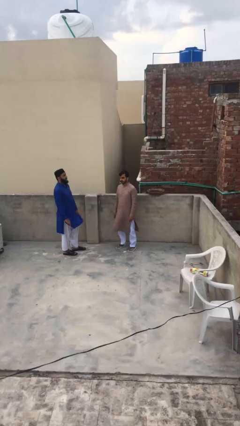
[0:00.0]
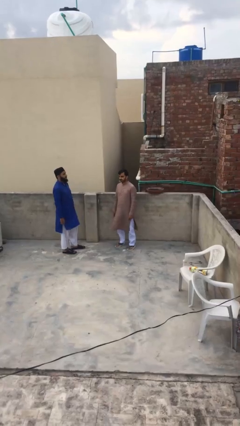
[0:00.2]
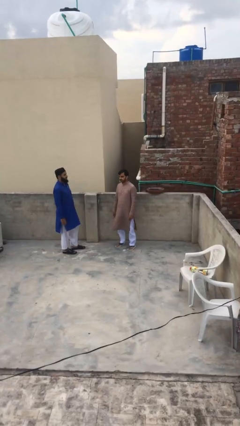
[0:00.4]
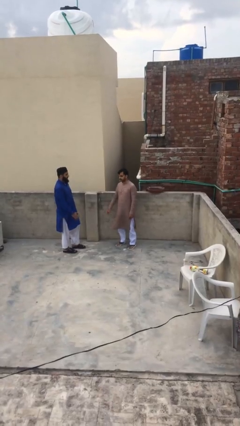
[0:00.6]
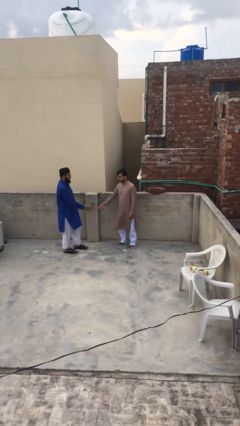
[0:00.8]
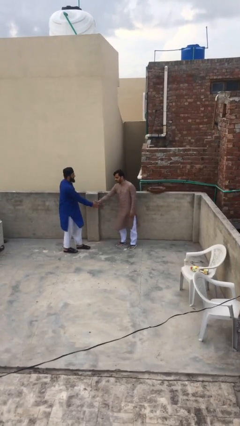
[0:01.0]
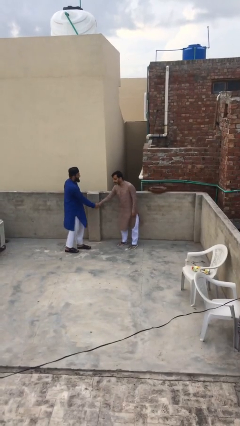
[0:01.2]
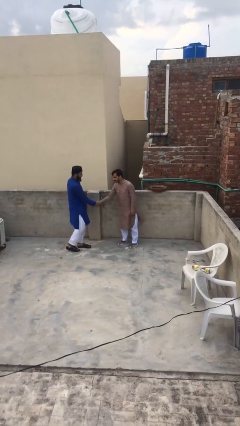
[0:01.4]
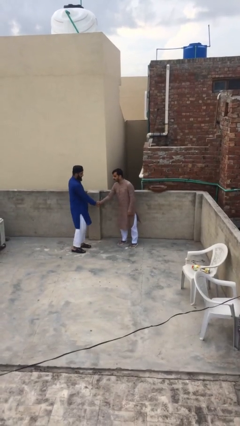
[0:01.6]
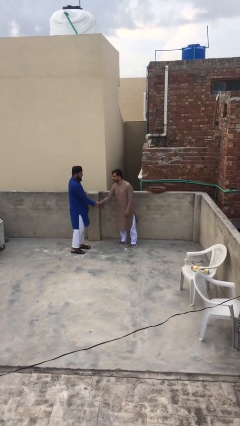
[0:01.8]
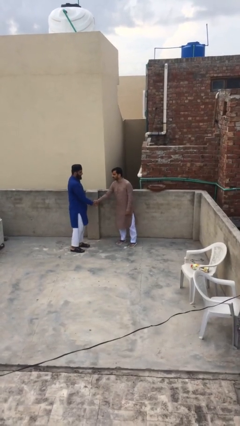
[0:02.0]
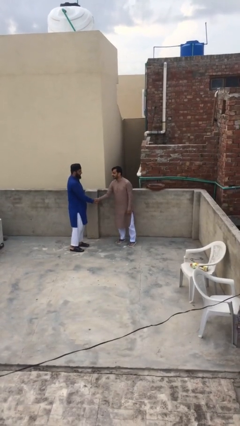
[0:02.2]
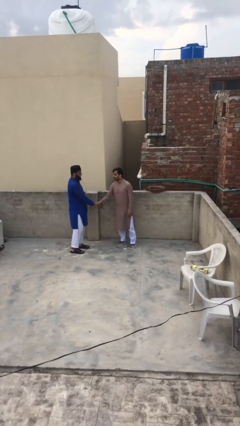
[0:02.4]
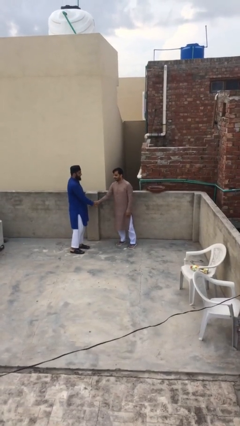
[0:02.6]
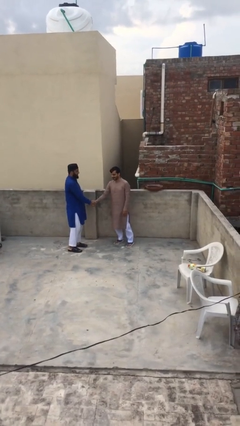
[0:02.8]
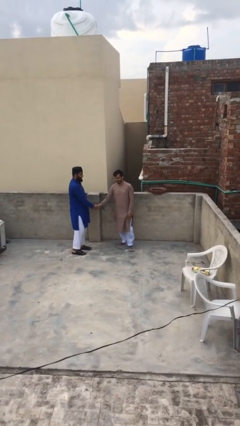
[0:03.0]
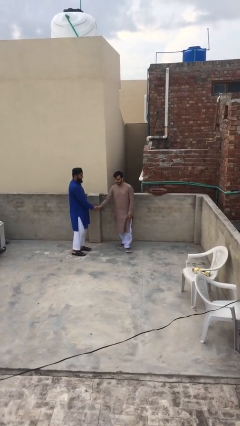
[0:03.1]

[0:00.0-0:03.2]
person shakes hand

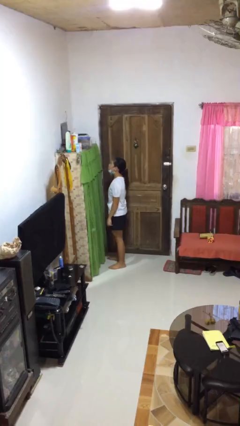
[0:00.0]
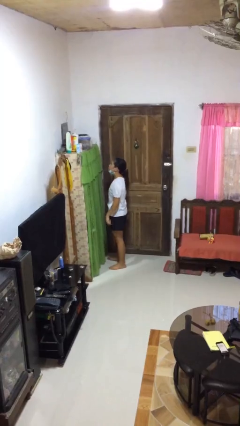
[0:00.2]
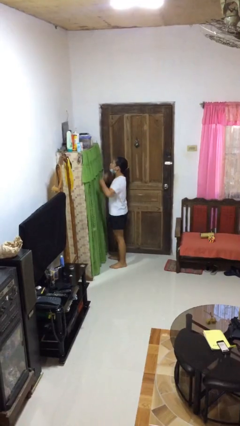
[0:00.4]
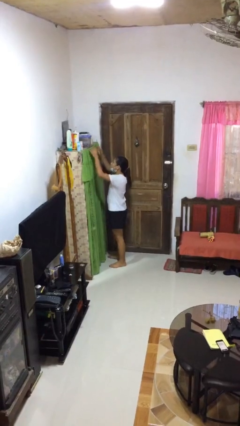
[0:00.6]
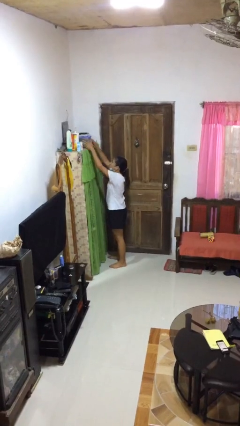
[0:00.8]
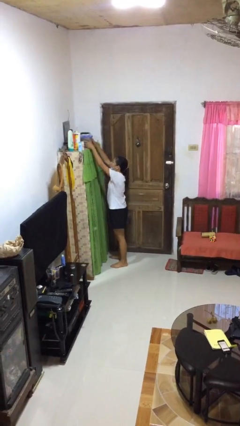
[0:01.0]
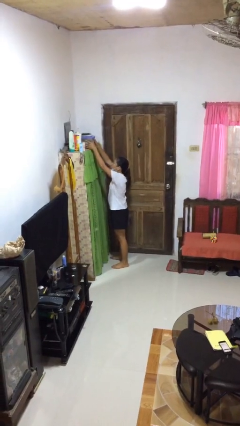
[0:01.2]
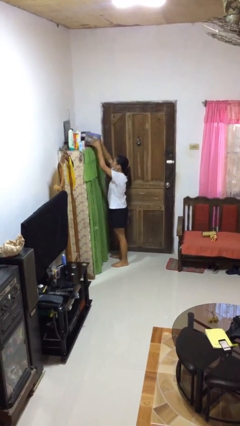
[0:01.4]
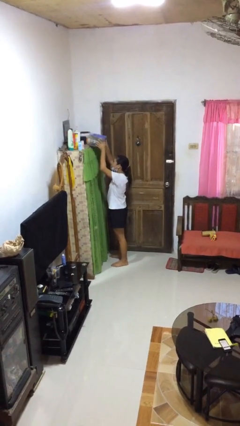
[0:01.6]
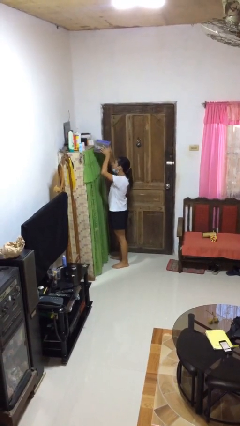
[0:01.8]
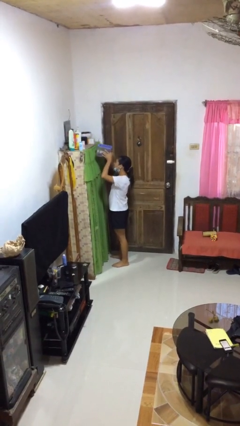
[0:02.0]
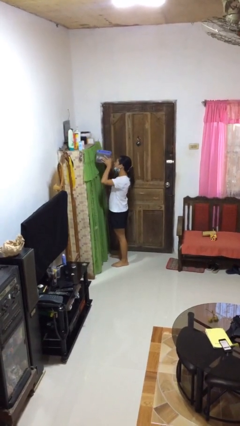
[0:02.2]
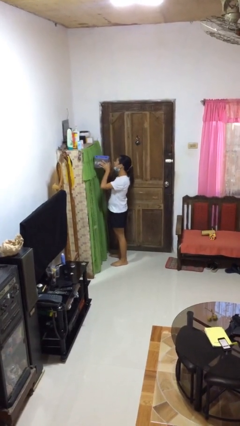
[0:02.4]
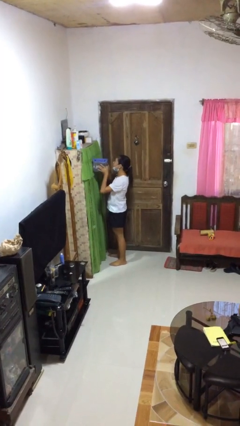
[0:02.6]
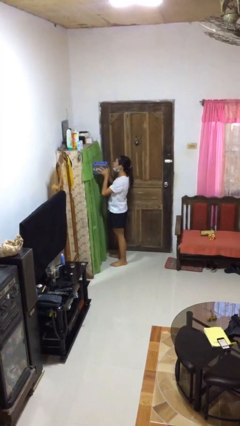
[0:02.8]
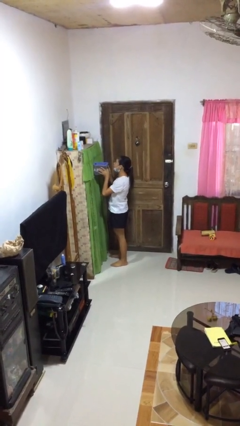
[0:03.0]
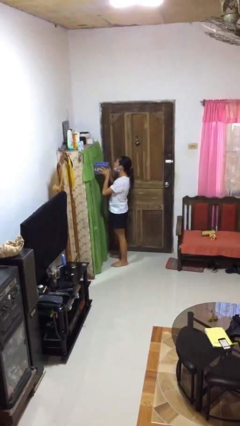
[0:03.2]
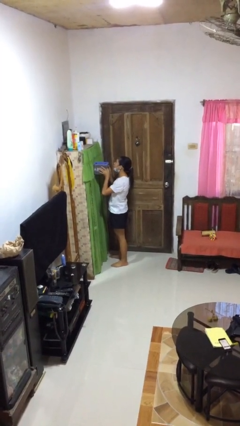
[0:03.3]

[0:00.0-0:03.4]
person picks up object from shelf

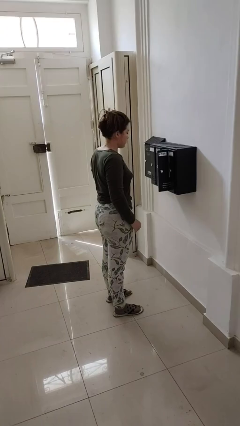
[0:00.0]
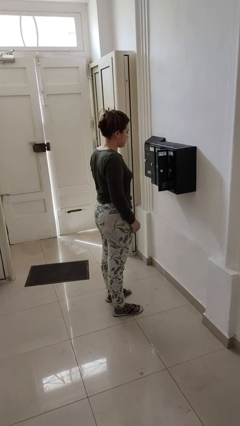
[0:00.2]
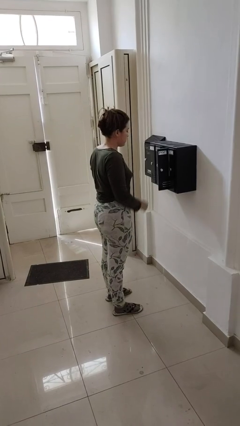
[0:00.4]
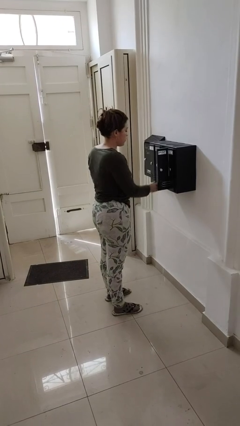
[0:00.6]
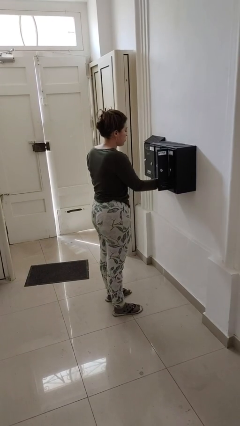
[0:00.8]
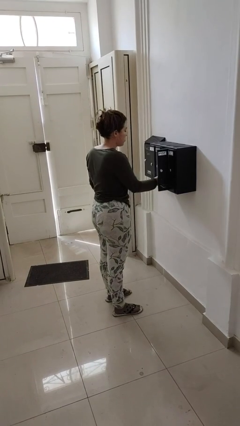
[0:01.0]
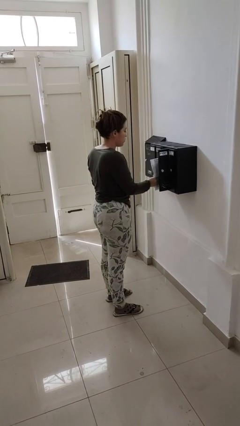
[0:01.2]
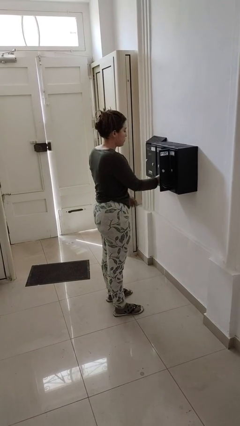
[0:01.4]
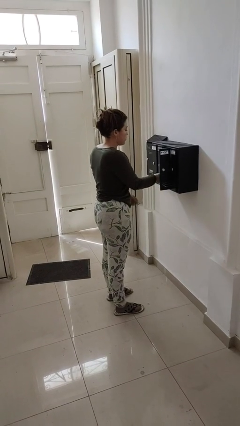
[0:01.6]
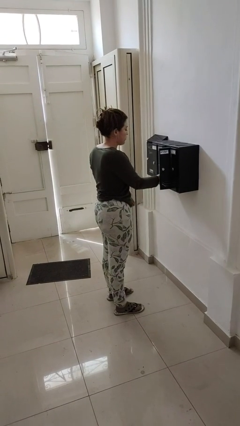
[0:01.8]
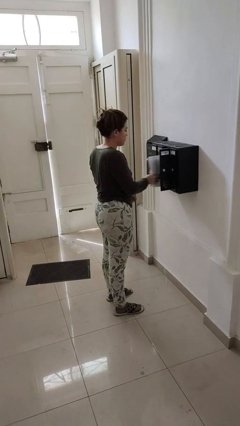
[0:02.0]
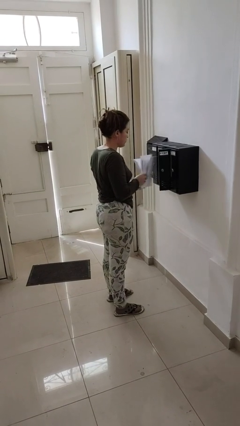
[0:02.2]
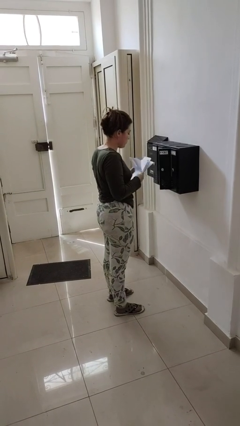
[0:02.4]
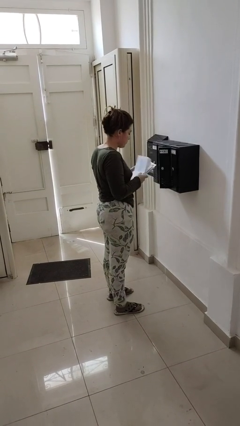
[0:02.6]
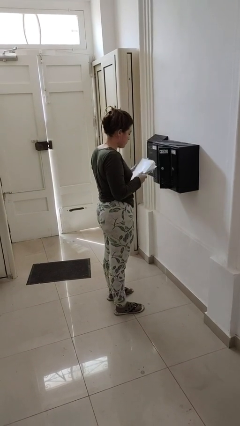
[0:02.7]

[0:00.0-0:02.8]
person takes letters from mailbox

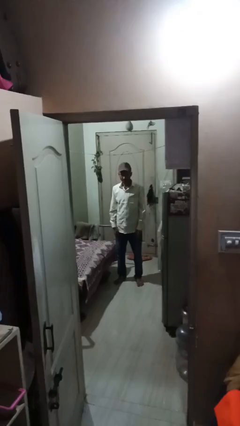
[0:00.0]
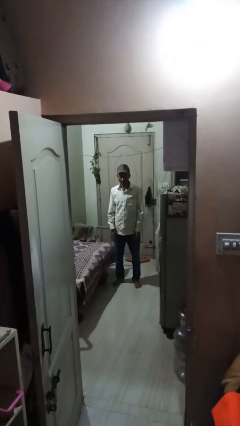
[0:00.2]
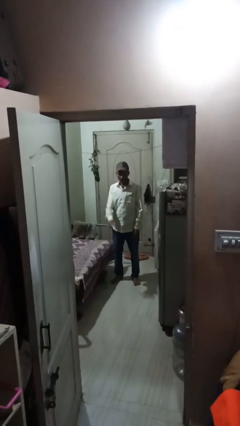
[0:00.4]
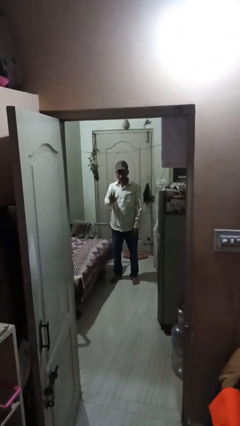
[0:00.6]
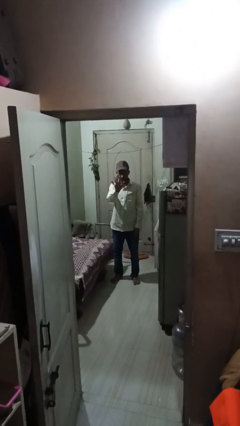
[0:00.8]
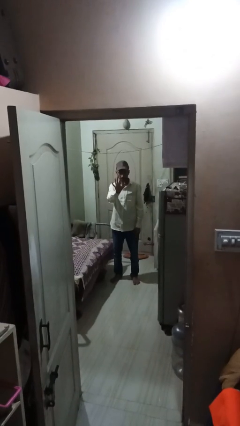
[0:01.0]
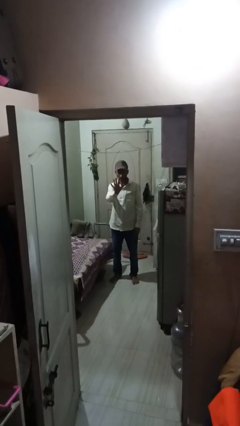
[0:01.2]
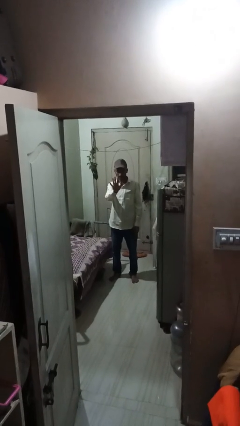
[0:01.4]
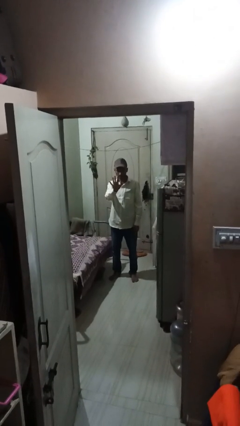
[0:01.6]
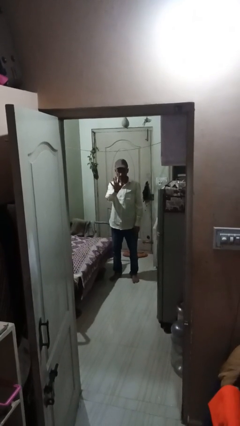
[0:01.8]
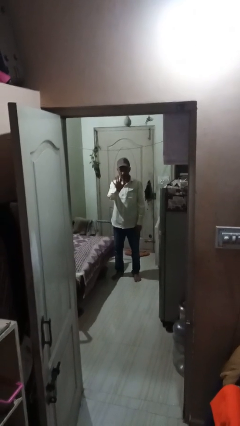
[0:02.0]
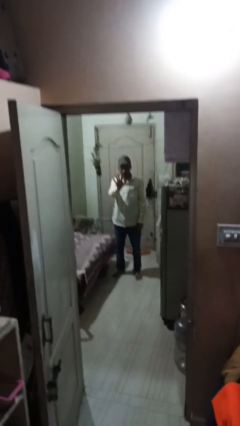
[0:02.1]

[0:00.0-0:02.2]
person gestures number five

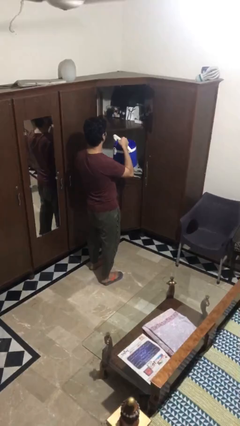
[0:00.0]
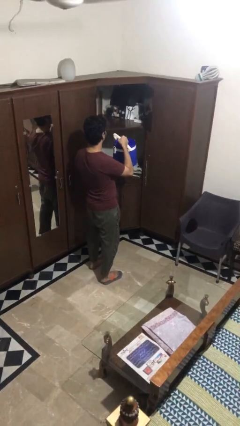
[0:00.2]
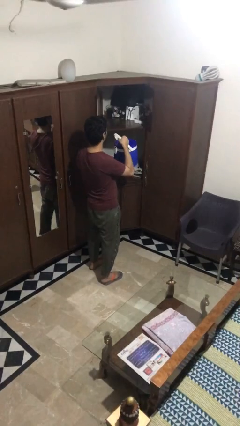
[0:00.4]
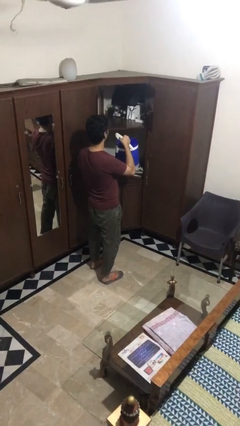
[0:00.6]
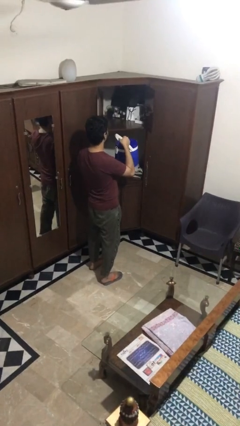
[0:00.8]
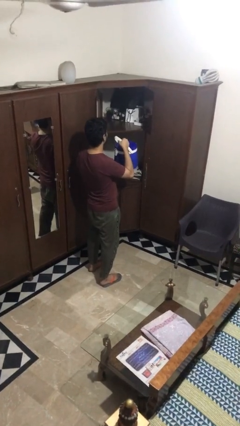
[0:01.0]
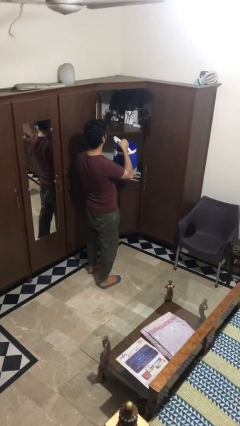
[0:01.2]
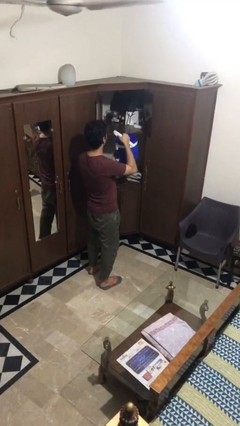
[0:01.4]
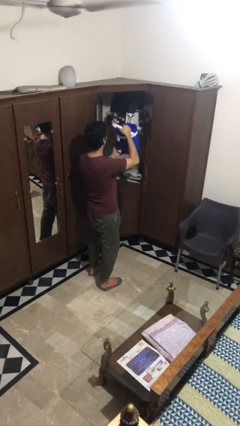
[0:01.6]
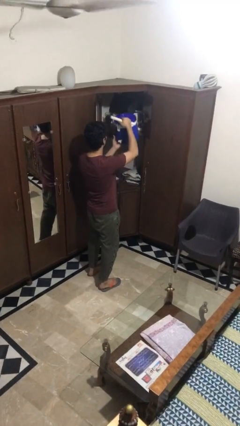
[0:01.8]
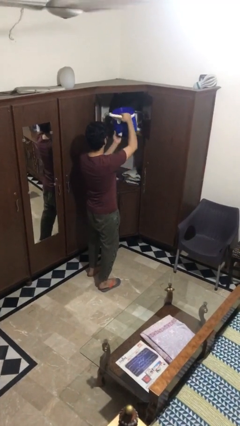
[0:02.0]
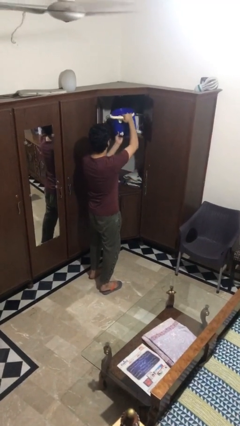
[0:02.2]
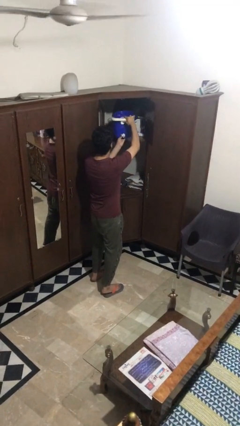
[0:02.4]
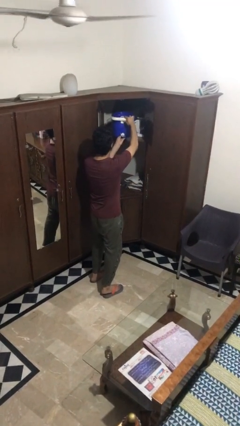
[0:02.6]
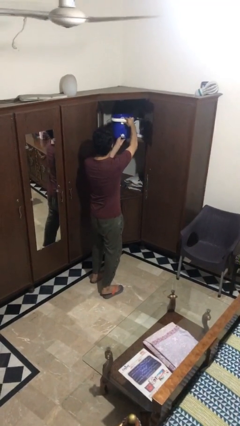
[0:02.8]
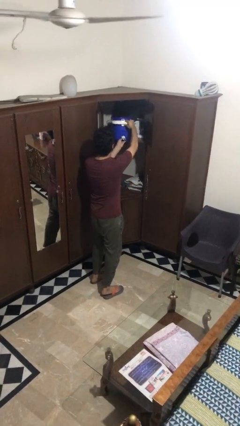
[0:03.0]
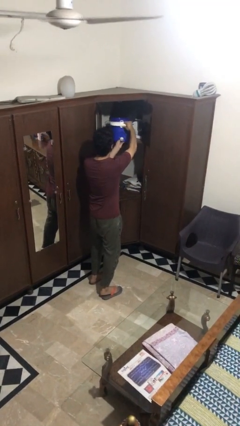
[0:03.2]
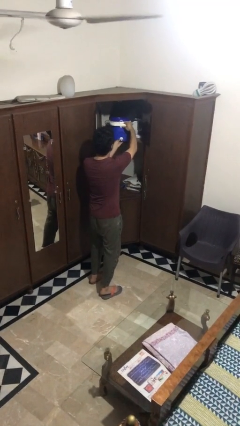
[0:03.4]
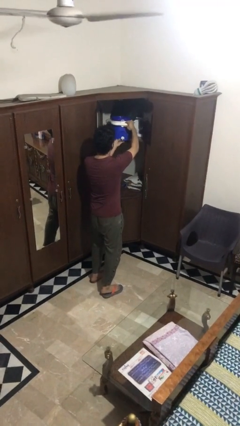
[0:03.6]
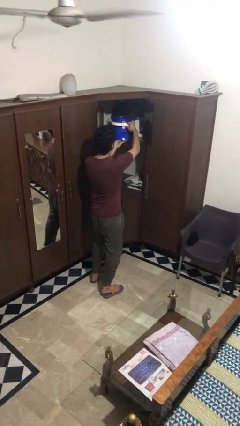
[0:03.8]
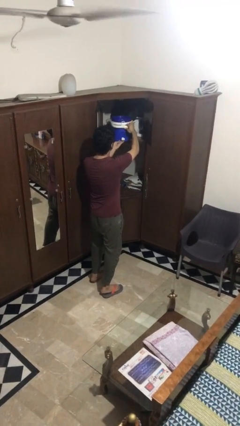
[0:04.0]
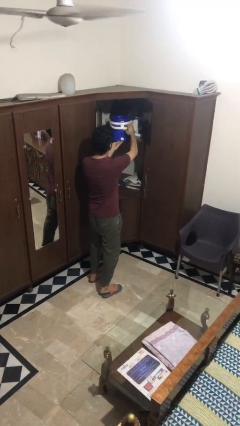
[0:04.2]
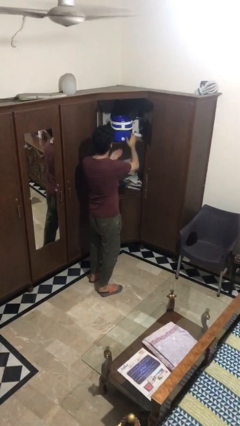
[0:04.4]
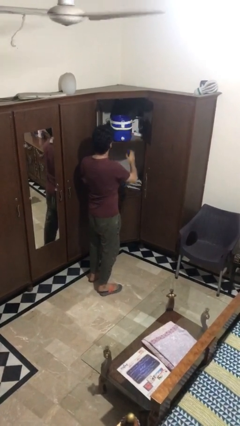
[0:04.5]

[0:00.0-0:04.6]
person puts down object on shelf

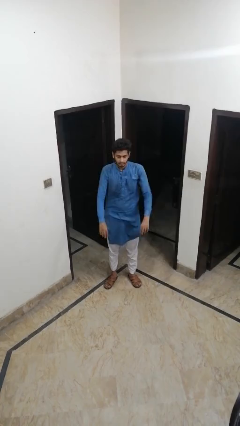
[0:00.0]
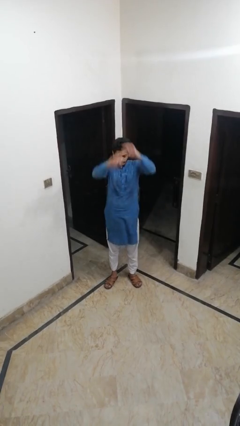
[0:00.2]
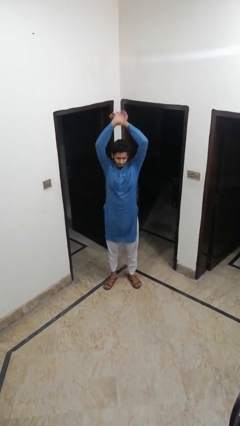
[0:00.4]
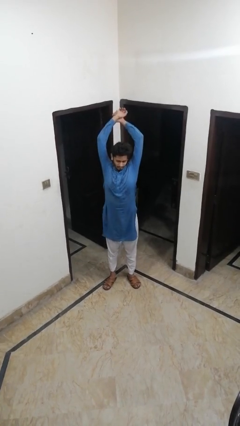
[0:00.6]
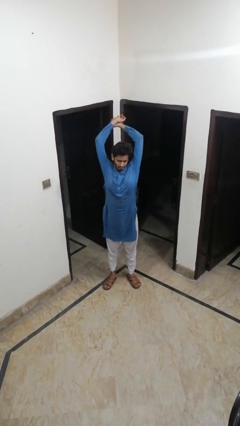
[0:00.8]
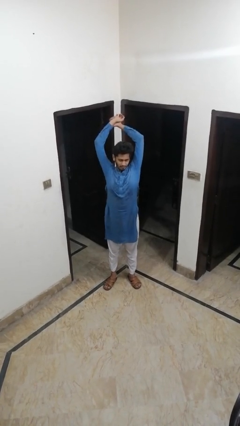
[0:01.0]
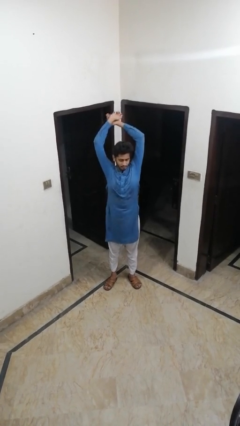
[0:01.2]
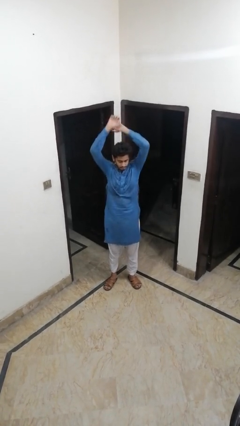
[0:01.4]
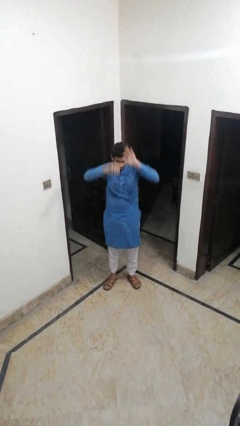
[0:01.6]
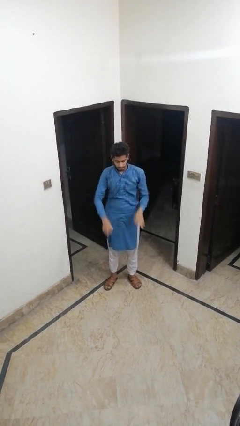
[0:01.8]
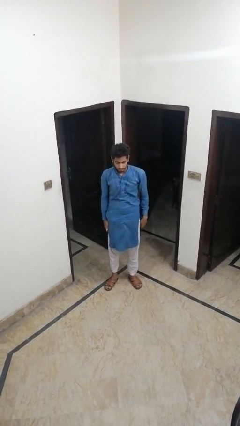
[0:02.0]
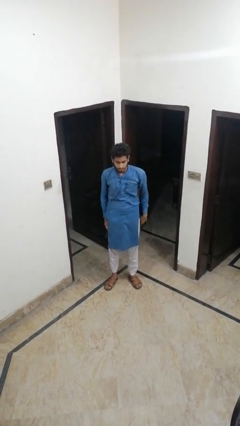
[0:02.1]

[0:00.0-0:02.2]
person stretches arms over head
